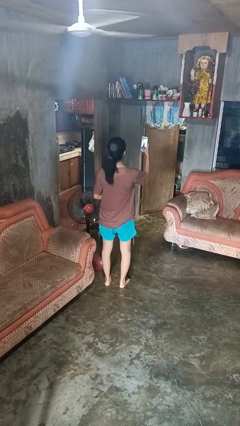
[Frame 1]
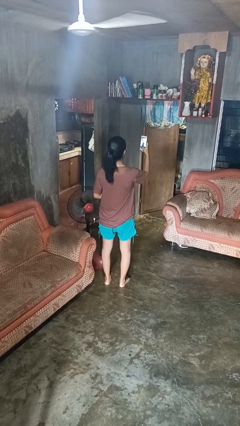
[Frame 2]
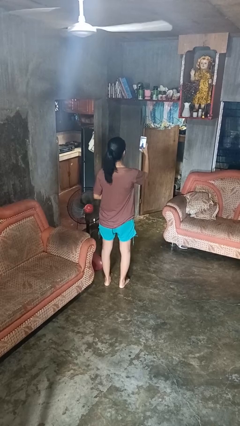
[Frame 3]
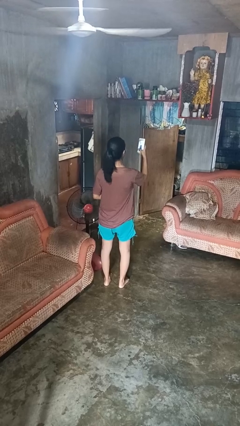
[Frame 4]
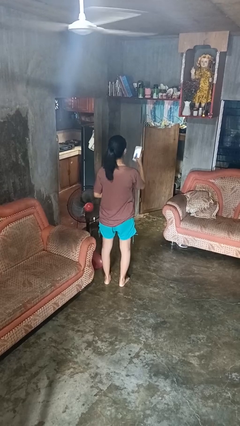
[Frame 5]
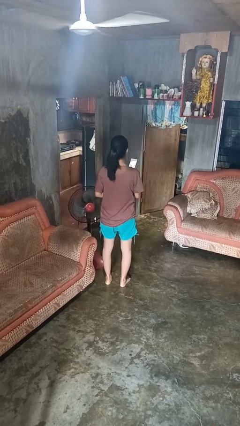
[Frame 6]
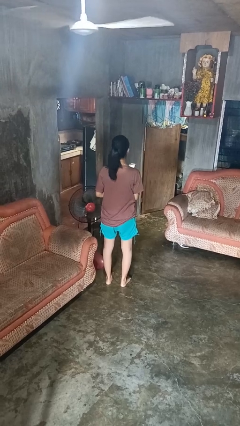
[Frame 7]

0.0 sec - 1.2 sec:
person takes selfie

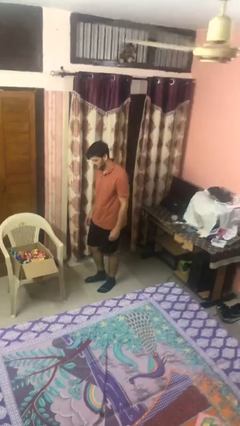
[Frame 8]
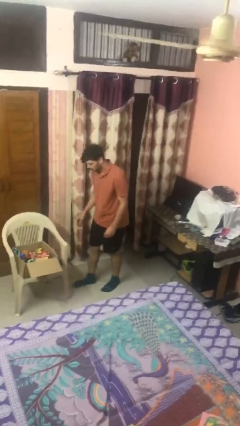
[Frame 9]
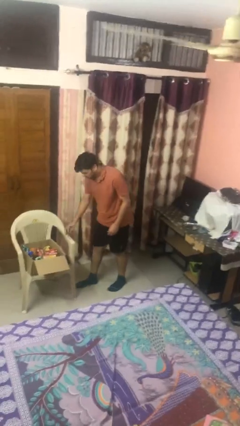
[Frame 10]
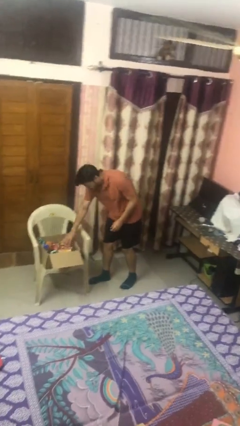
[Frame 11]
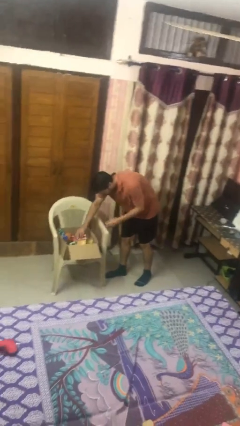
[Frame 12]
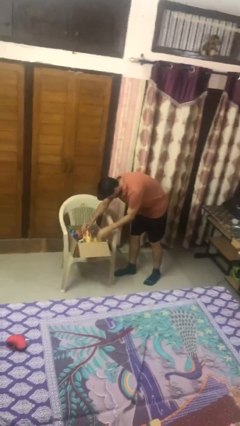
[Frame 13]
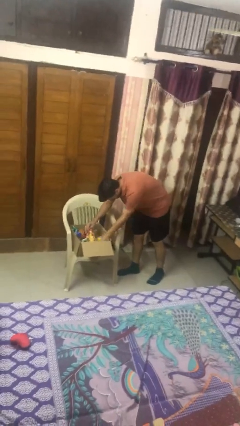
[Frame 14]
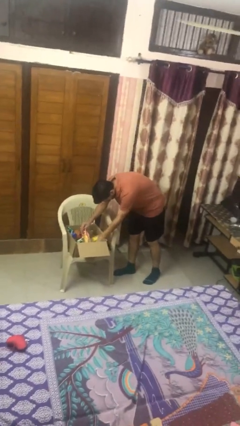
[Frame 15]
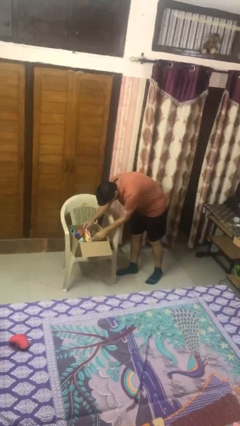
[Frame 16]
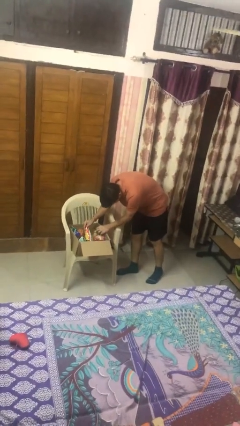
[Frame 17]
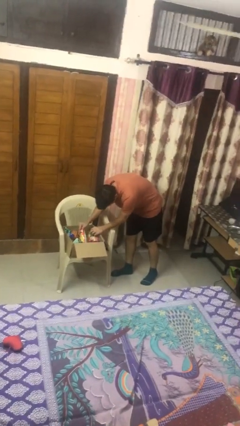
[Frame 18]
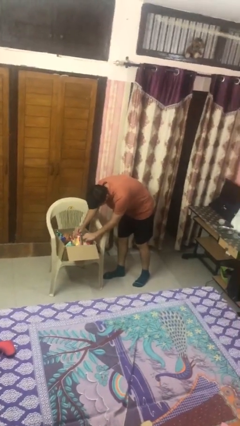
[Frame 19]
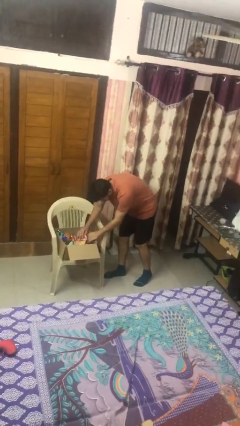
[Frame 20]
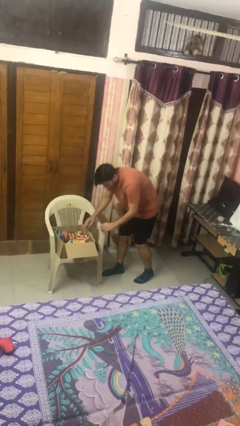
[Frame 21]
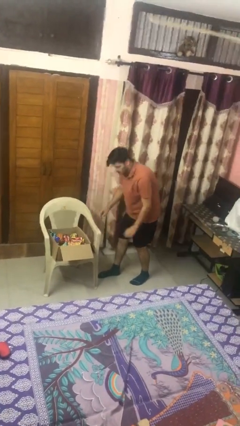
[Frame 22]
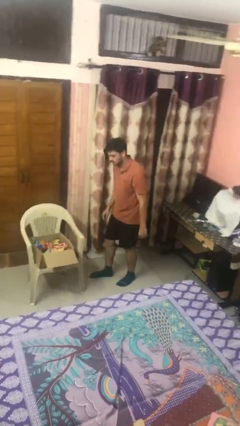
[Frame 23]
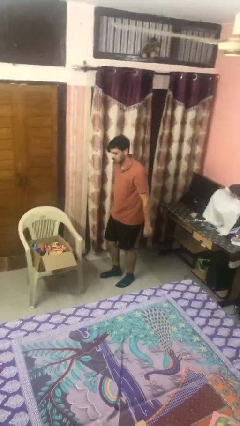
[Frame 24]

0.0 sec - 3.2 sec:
person searches in box

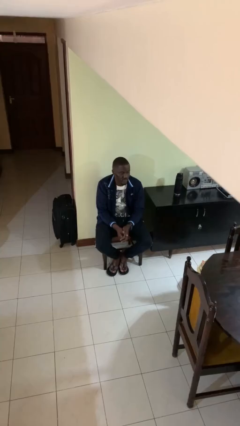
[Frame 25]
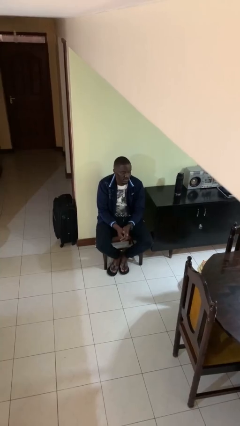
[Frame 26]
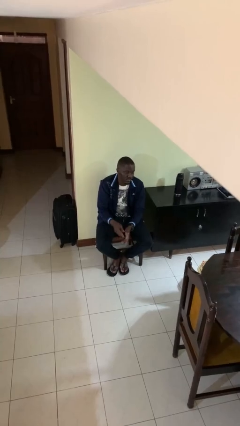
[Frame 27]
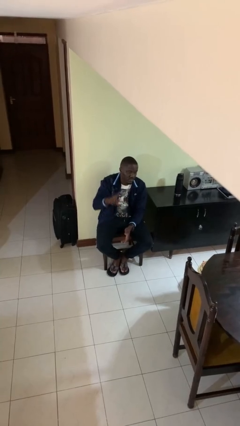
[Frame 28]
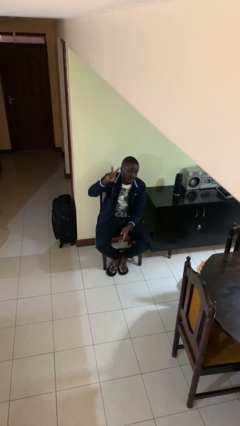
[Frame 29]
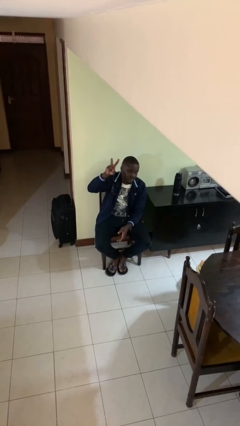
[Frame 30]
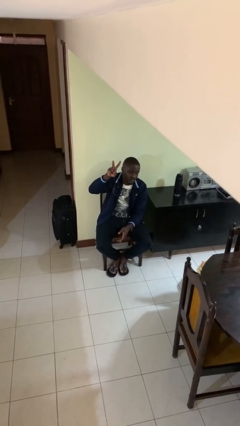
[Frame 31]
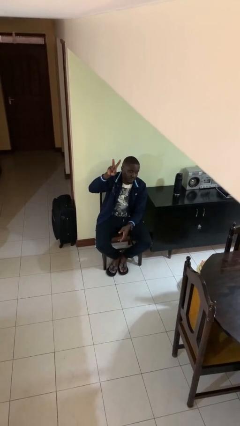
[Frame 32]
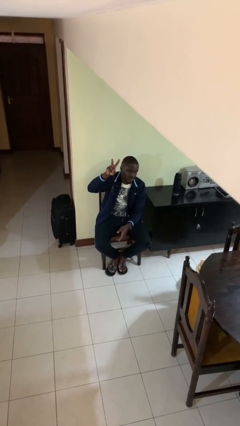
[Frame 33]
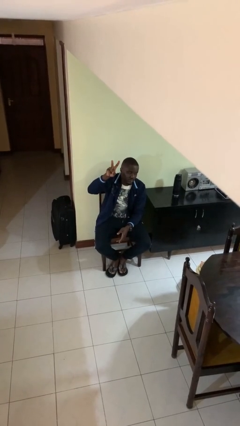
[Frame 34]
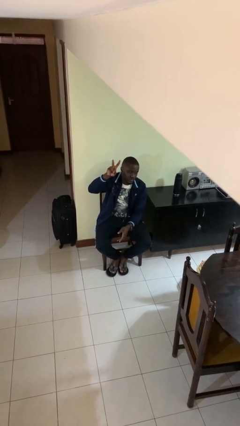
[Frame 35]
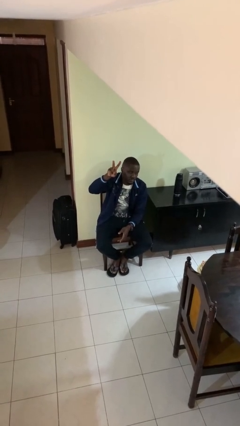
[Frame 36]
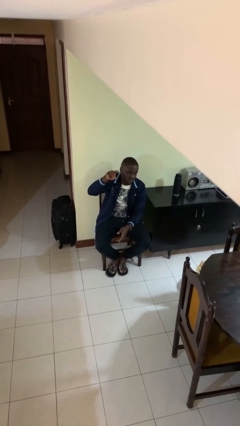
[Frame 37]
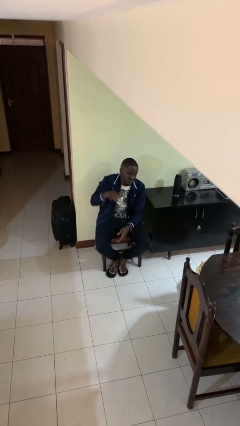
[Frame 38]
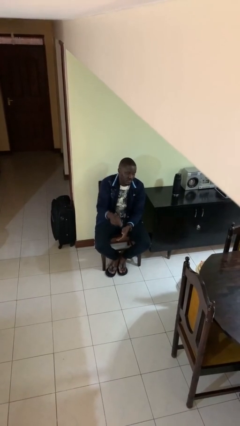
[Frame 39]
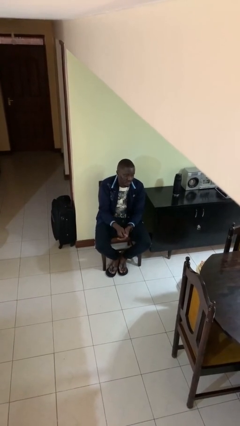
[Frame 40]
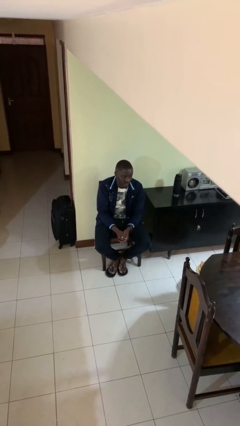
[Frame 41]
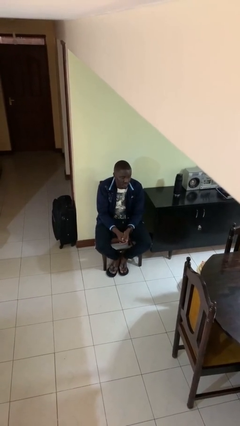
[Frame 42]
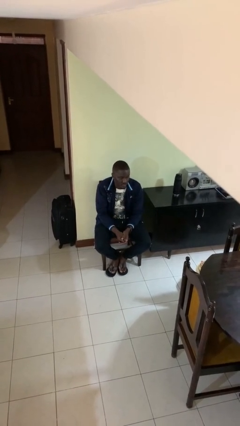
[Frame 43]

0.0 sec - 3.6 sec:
person gestures peace

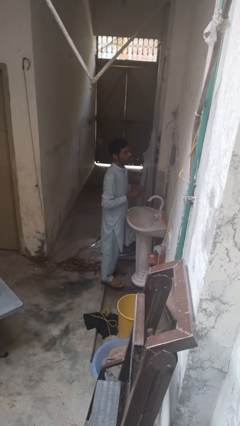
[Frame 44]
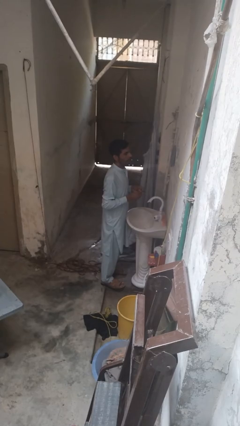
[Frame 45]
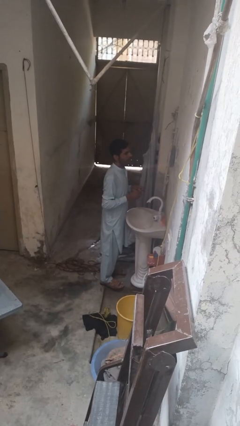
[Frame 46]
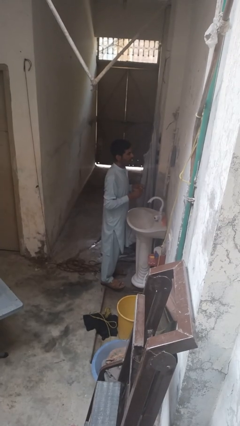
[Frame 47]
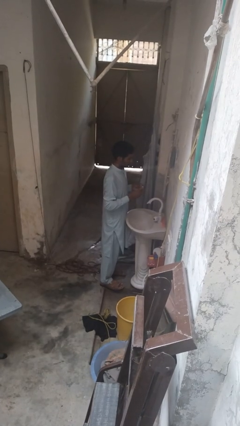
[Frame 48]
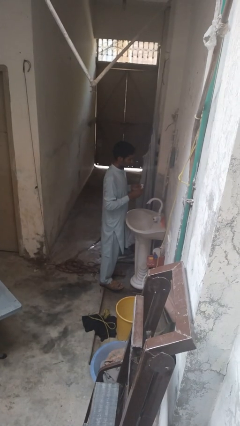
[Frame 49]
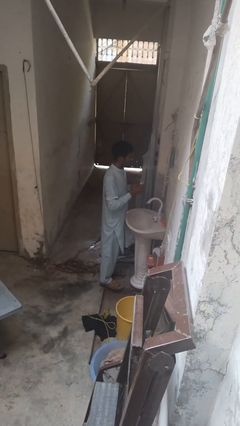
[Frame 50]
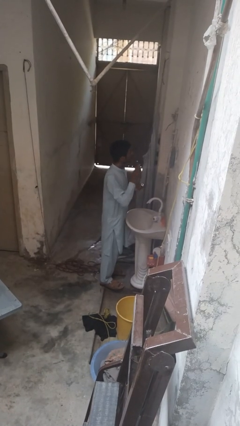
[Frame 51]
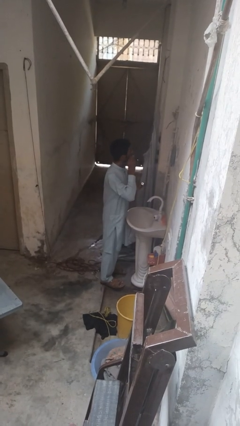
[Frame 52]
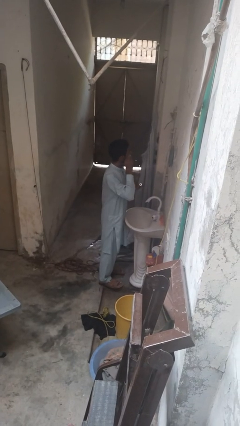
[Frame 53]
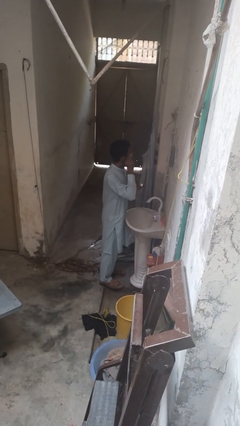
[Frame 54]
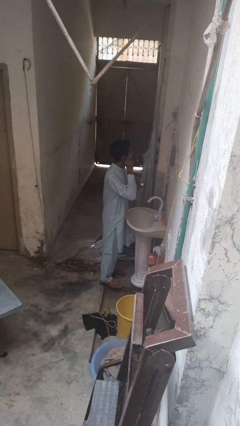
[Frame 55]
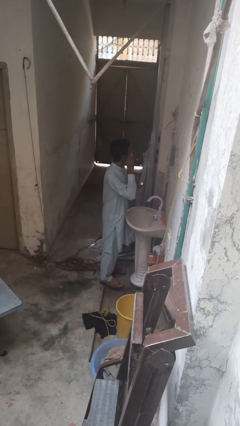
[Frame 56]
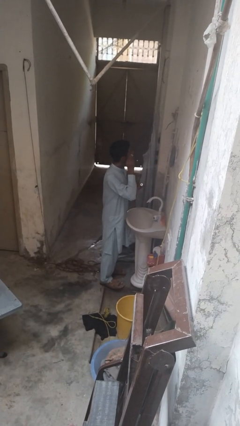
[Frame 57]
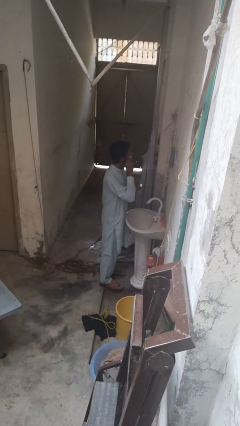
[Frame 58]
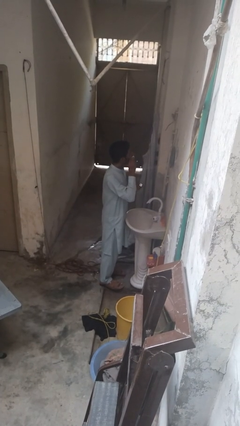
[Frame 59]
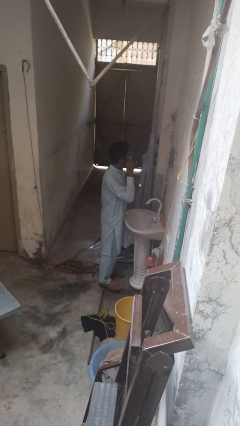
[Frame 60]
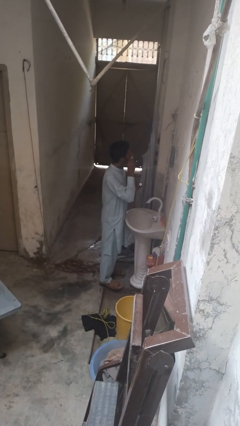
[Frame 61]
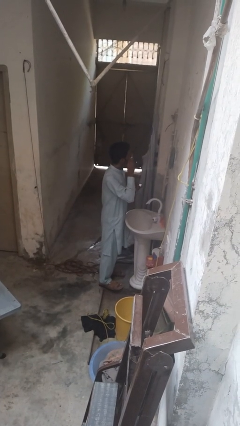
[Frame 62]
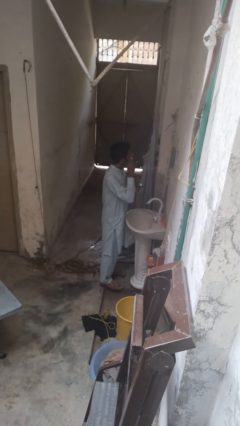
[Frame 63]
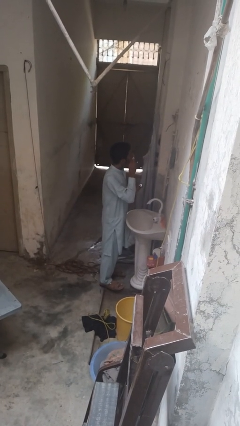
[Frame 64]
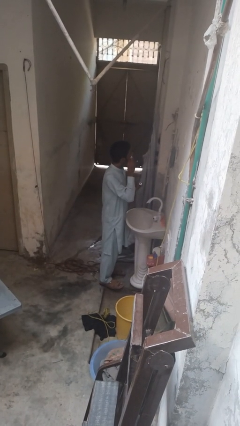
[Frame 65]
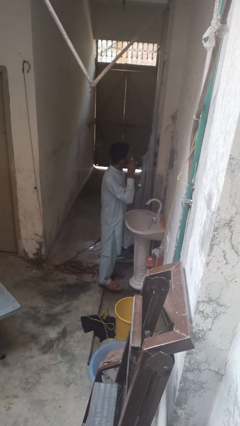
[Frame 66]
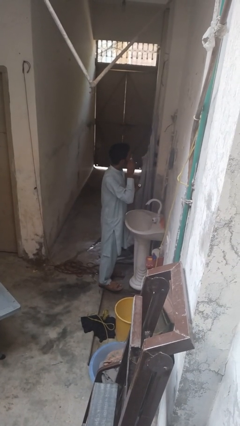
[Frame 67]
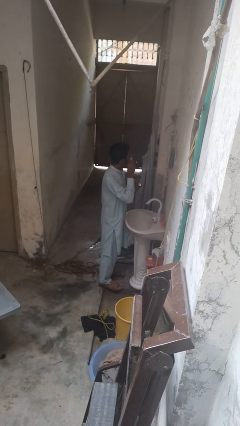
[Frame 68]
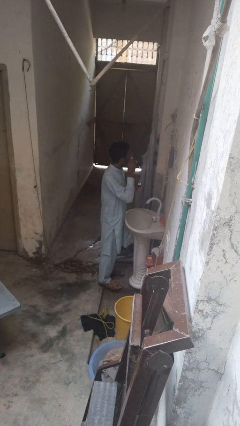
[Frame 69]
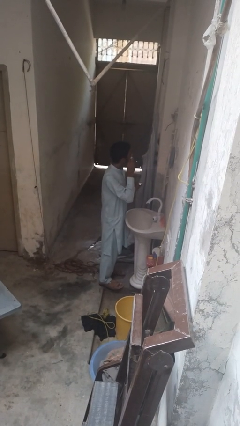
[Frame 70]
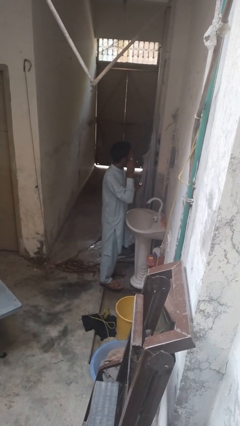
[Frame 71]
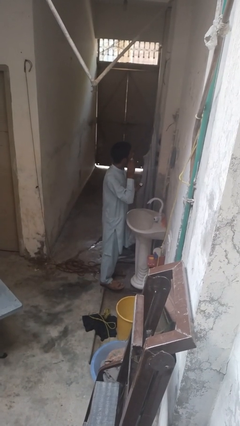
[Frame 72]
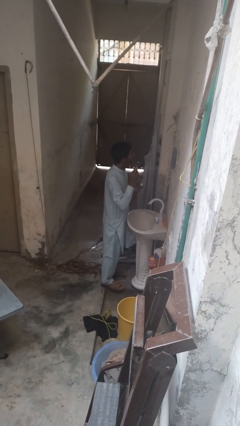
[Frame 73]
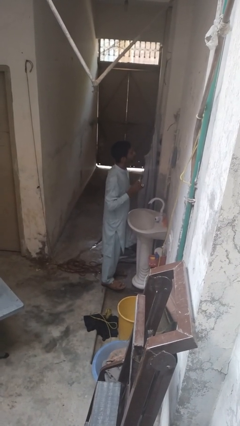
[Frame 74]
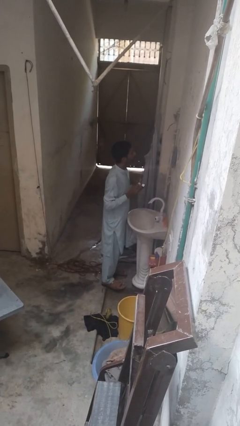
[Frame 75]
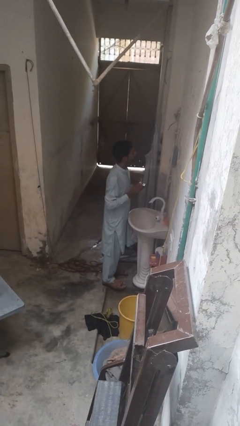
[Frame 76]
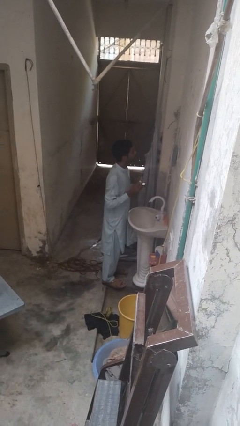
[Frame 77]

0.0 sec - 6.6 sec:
person applies eye makeup

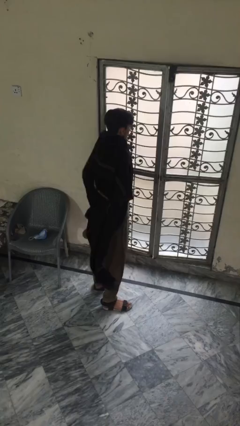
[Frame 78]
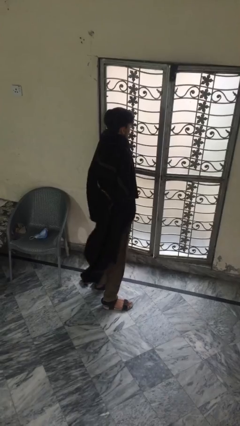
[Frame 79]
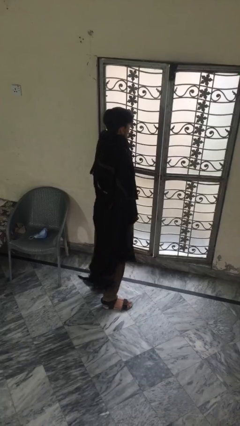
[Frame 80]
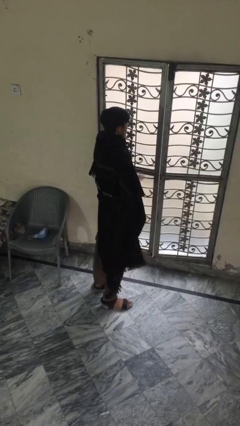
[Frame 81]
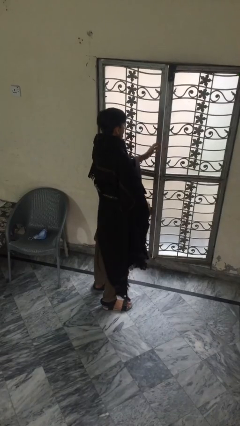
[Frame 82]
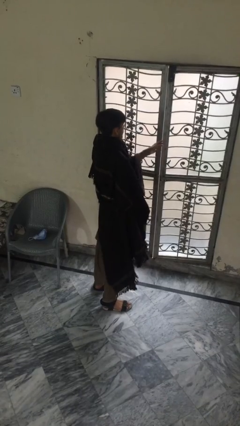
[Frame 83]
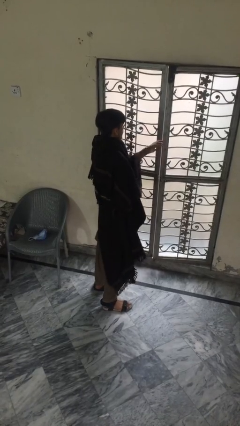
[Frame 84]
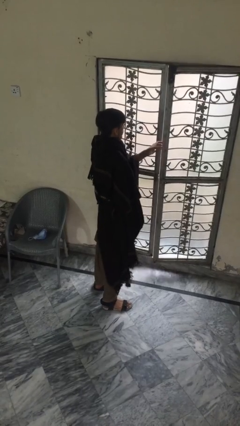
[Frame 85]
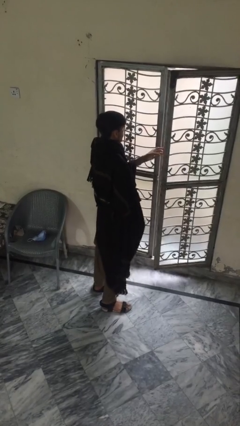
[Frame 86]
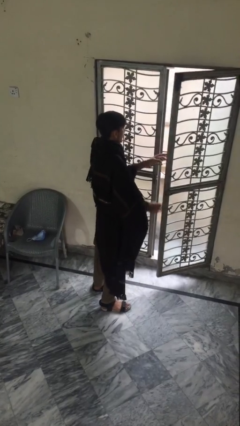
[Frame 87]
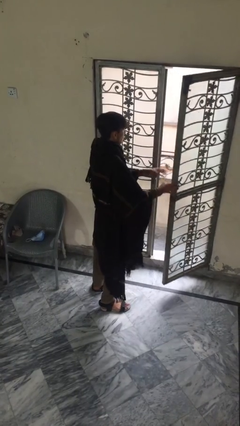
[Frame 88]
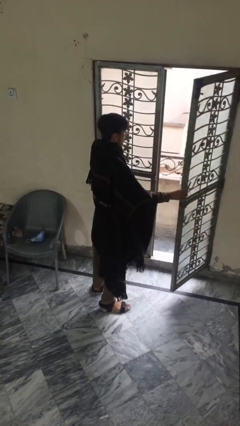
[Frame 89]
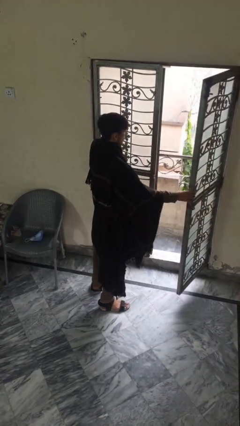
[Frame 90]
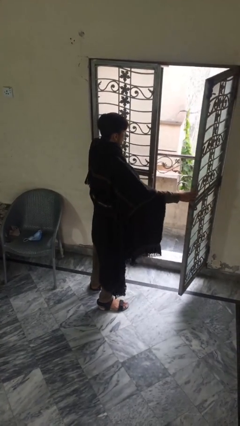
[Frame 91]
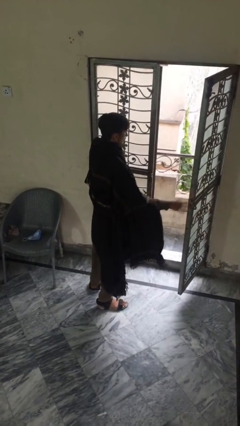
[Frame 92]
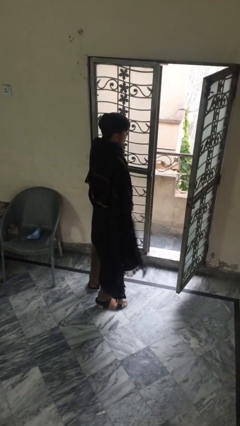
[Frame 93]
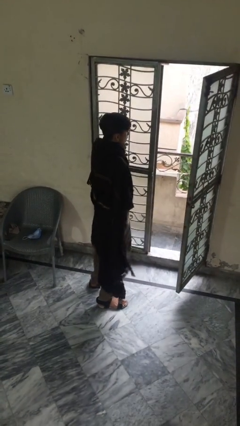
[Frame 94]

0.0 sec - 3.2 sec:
person opens facility door
